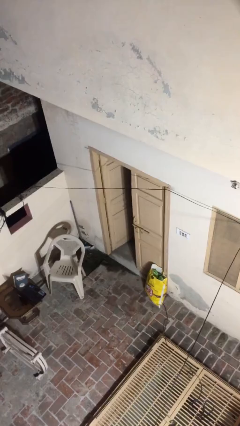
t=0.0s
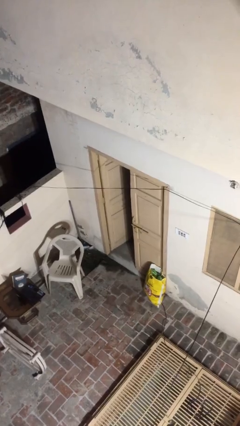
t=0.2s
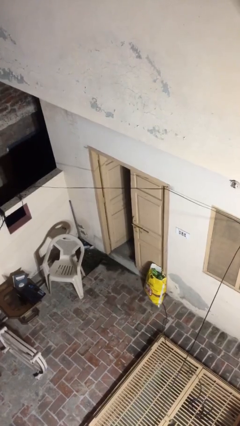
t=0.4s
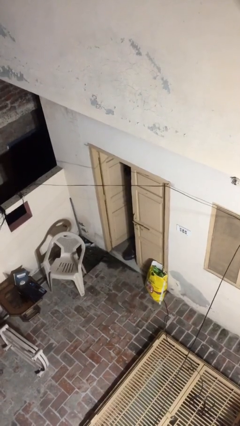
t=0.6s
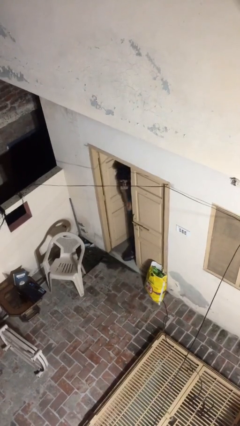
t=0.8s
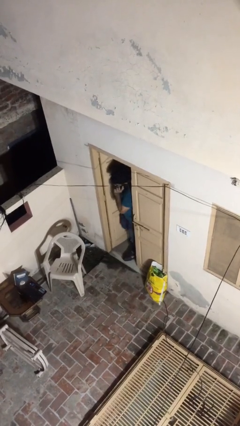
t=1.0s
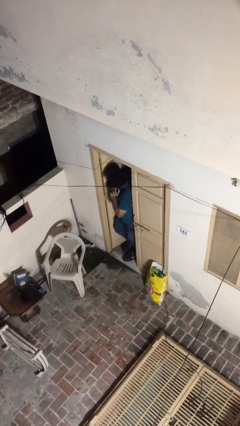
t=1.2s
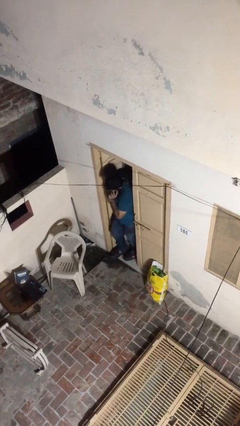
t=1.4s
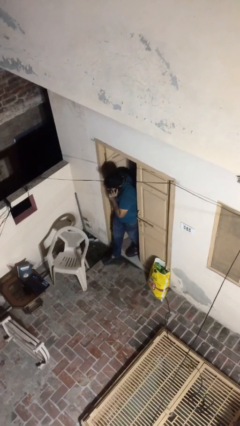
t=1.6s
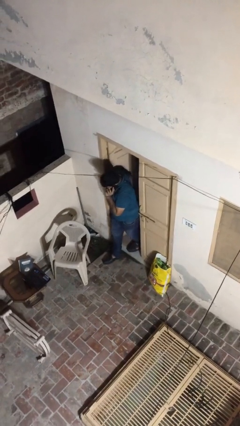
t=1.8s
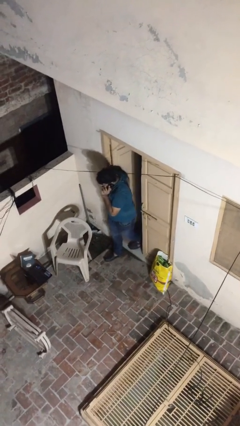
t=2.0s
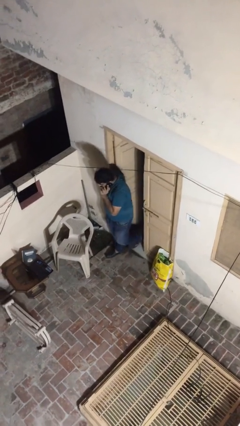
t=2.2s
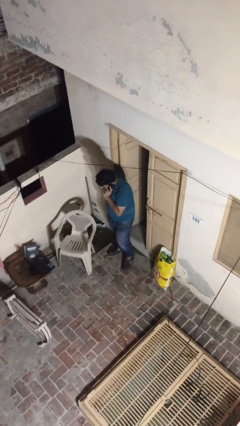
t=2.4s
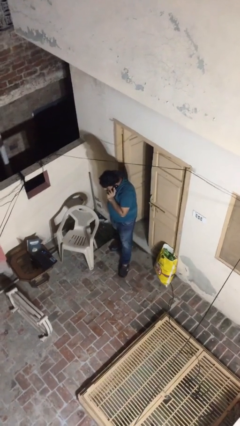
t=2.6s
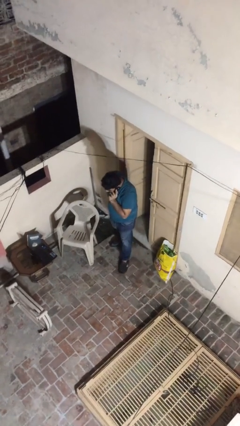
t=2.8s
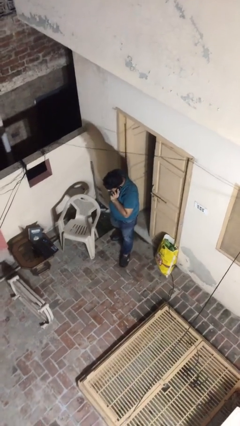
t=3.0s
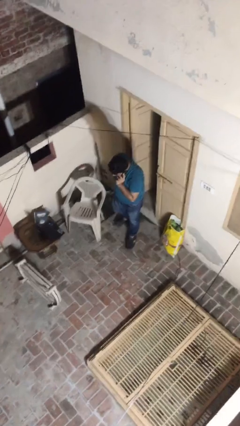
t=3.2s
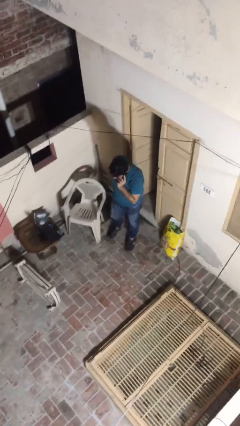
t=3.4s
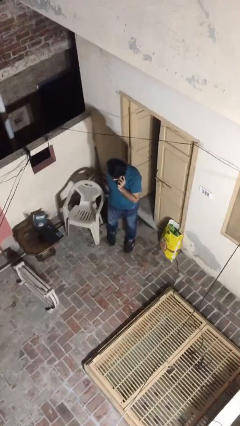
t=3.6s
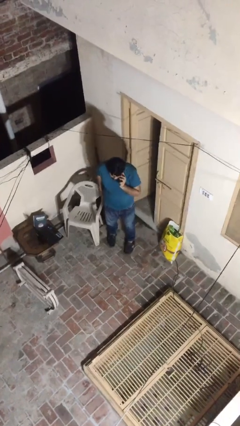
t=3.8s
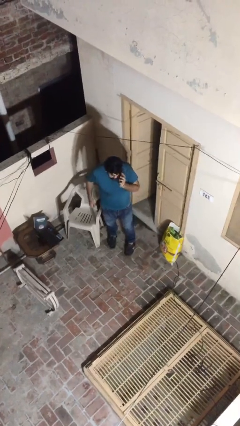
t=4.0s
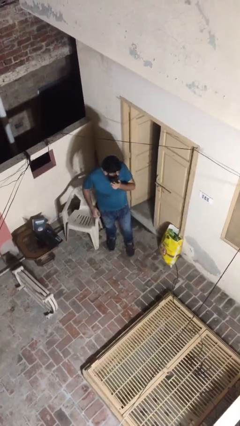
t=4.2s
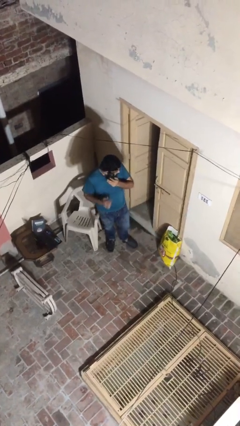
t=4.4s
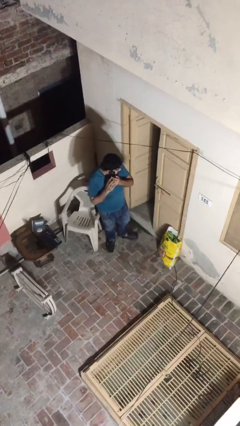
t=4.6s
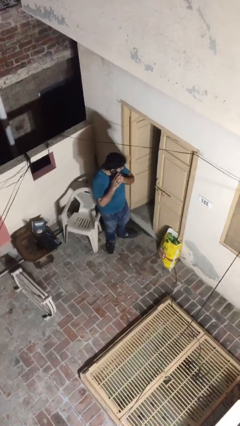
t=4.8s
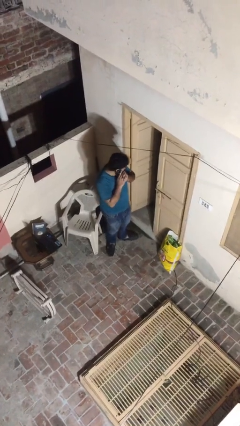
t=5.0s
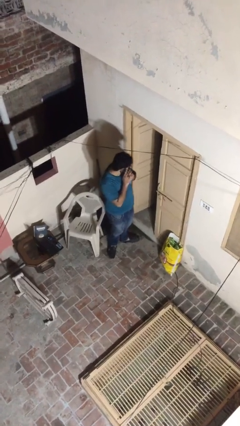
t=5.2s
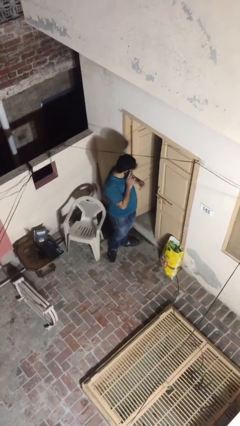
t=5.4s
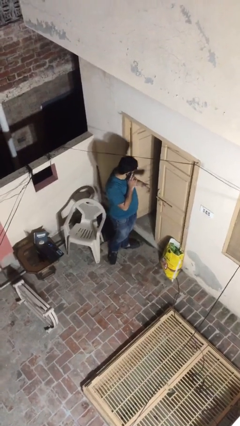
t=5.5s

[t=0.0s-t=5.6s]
person enters scene through structure

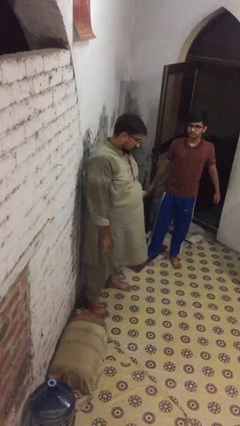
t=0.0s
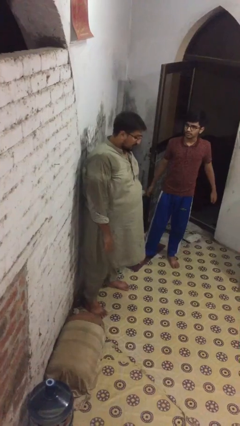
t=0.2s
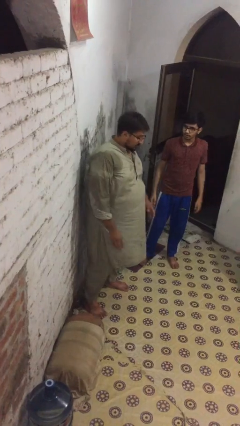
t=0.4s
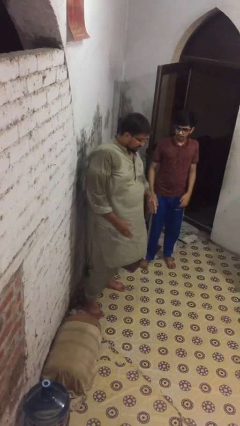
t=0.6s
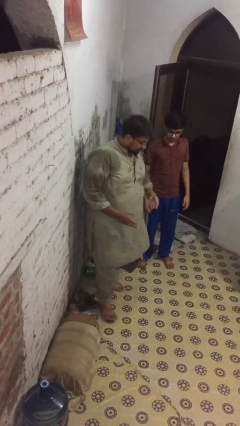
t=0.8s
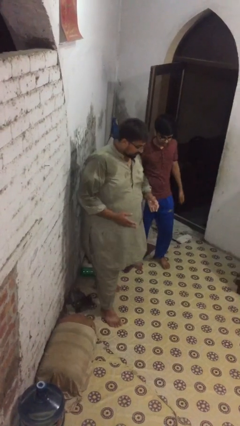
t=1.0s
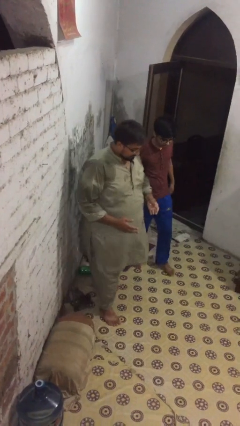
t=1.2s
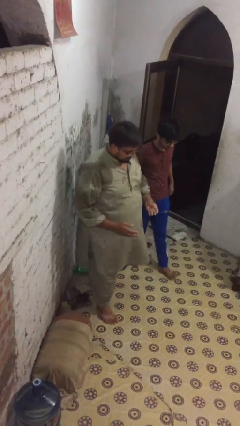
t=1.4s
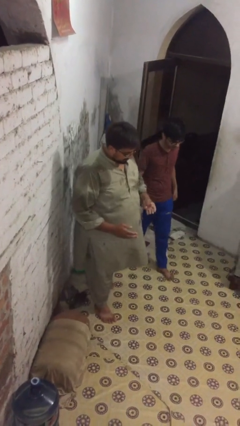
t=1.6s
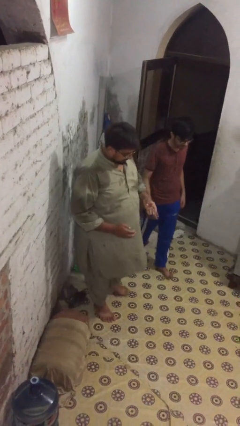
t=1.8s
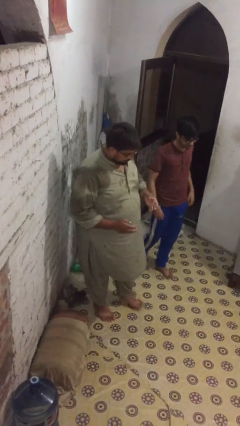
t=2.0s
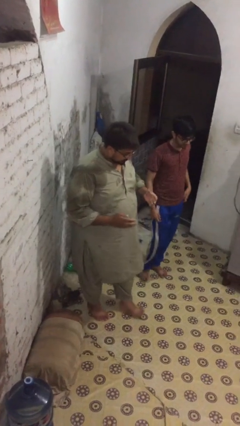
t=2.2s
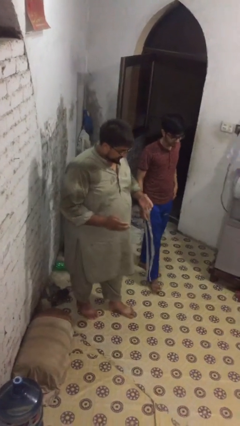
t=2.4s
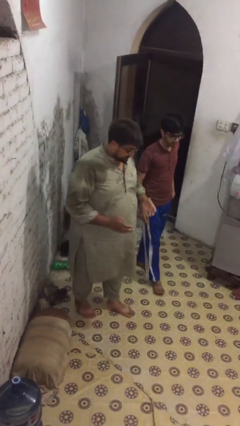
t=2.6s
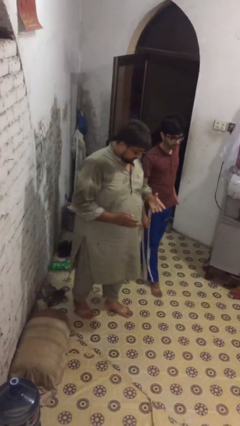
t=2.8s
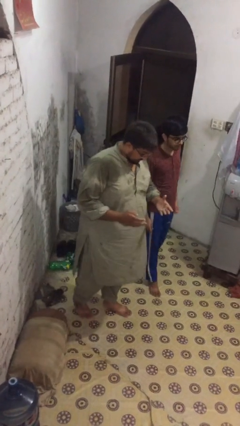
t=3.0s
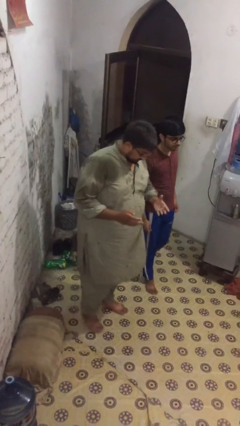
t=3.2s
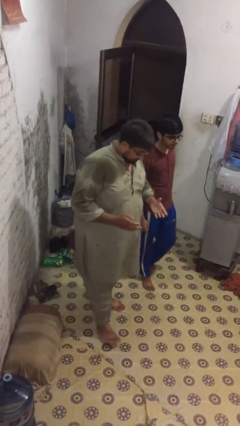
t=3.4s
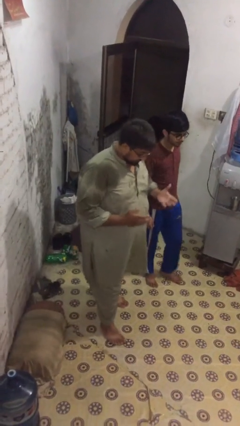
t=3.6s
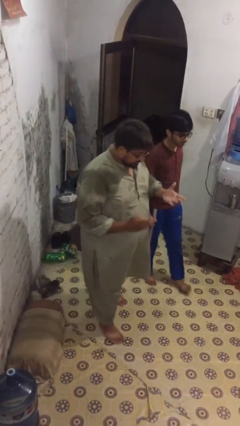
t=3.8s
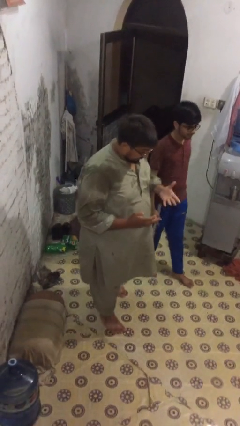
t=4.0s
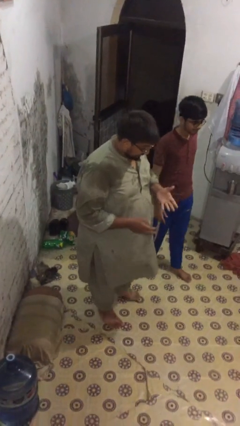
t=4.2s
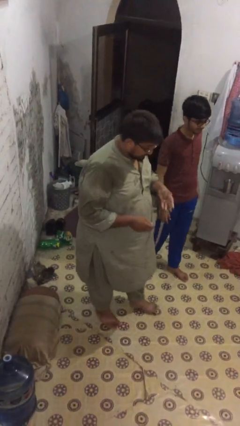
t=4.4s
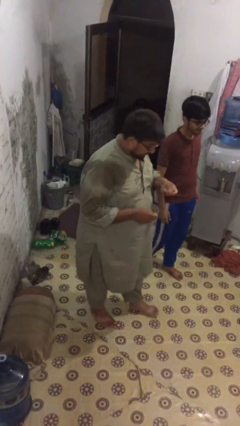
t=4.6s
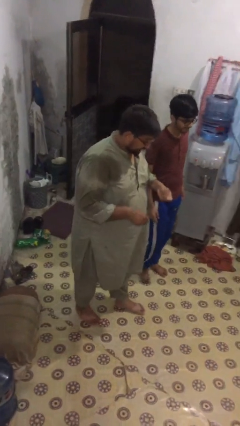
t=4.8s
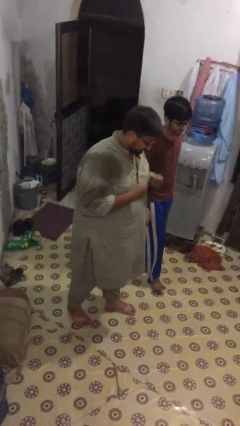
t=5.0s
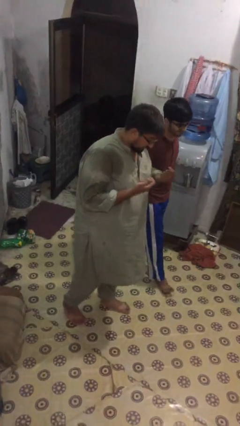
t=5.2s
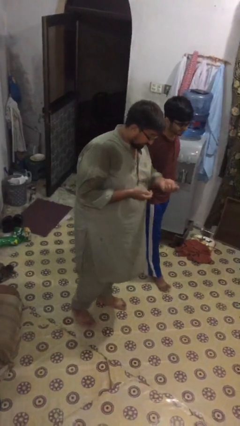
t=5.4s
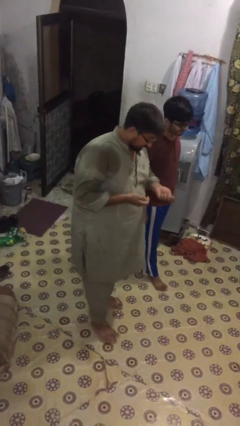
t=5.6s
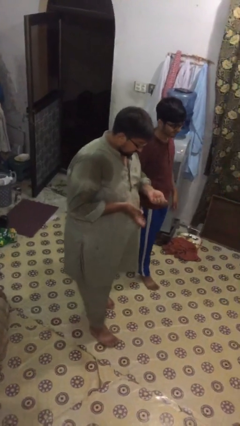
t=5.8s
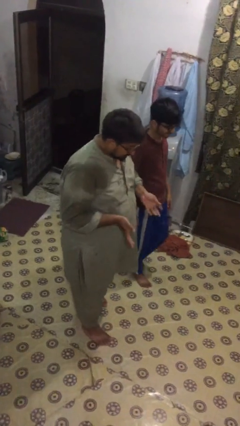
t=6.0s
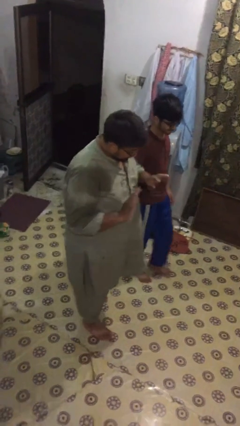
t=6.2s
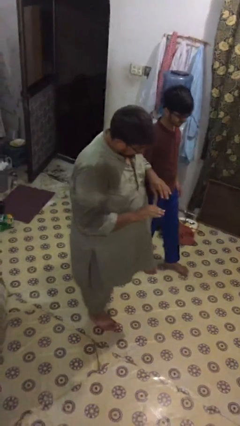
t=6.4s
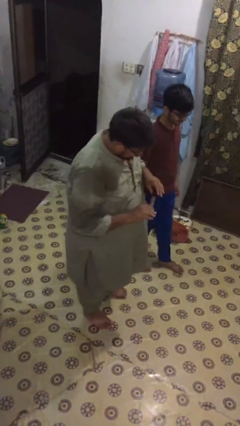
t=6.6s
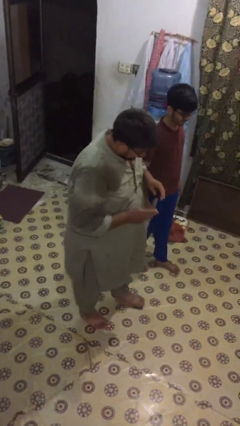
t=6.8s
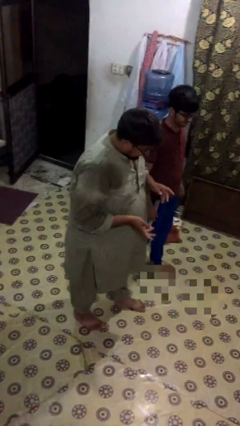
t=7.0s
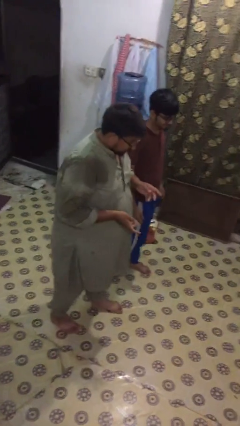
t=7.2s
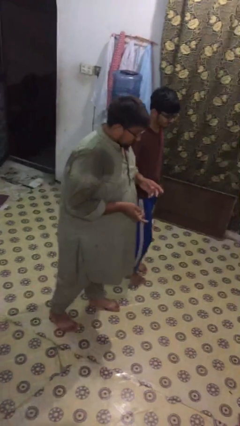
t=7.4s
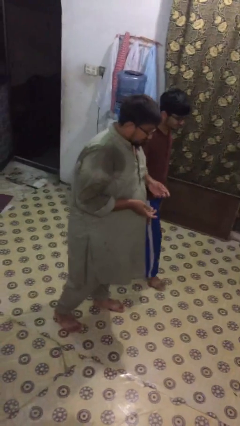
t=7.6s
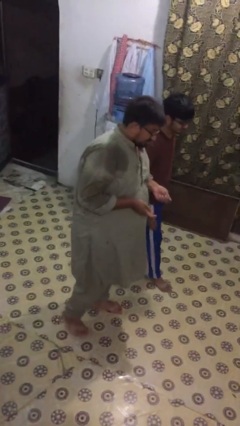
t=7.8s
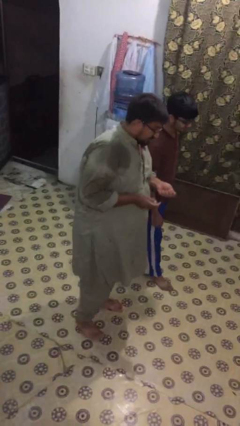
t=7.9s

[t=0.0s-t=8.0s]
person talks to person

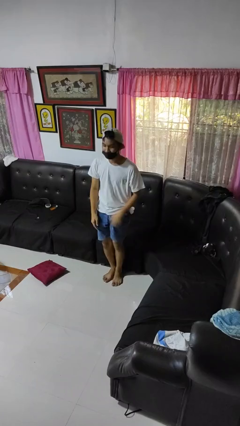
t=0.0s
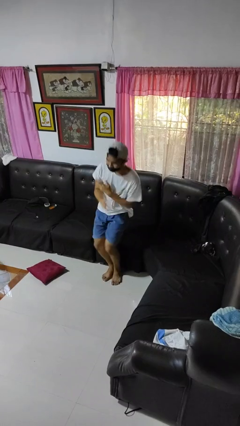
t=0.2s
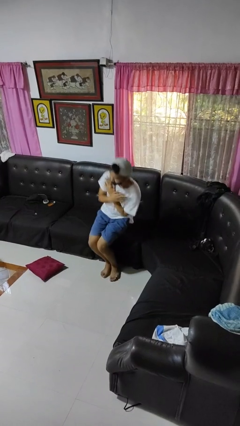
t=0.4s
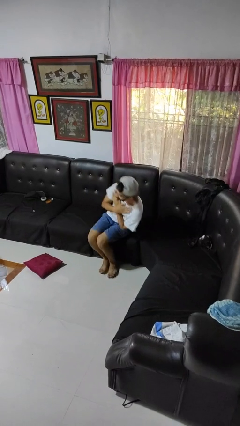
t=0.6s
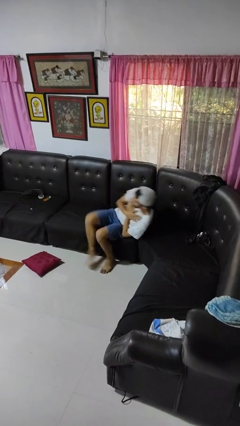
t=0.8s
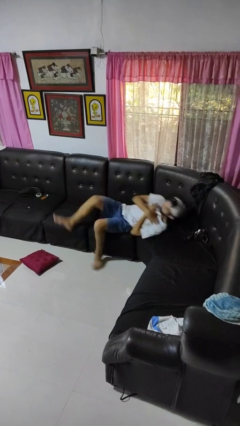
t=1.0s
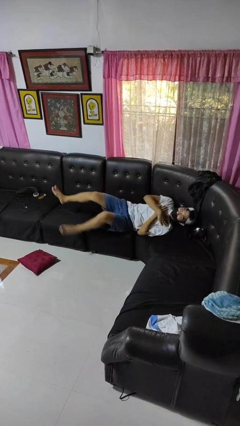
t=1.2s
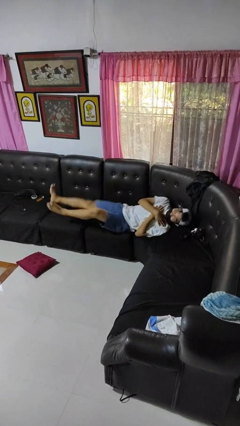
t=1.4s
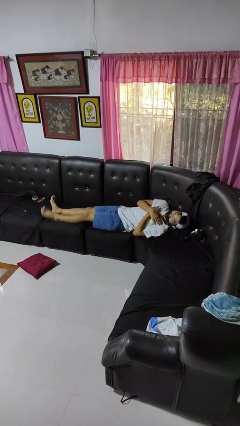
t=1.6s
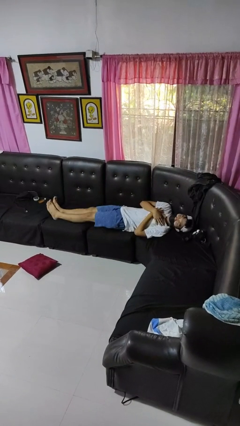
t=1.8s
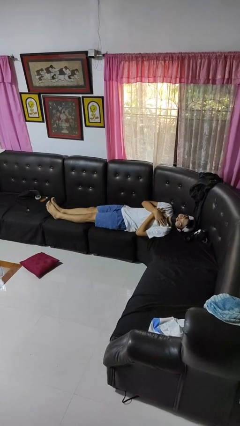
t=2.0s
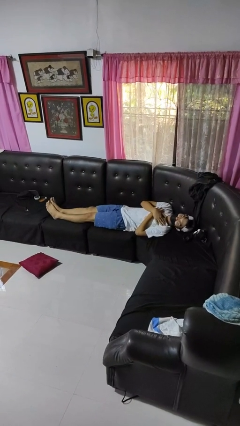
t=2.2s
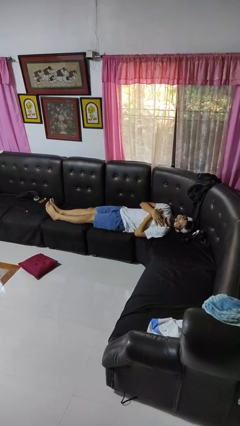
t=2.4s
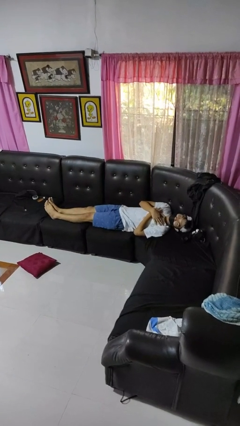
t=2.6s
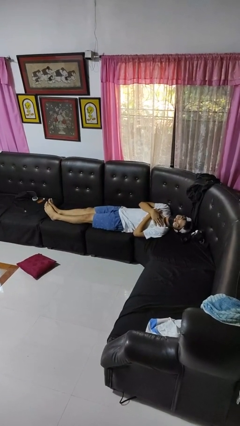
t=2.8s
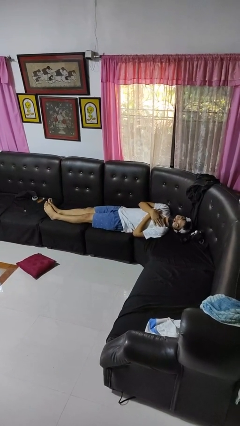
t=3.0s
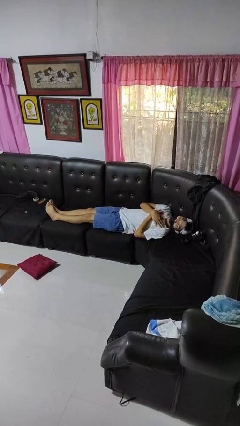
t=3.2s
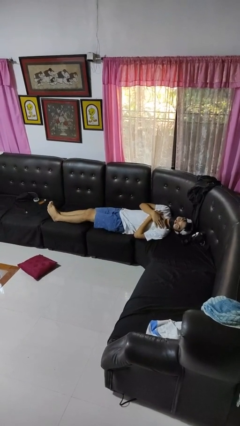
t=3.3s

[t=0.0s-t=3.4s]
person lies down on couch

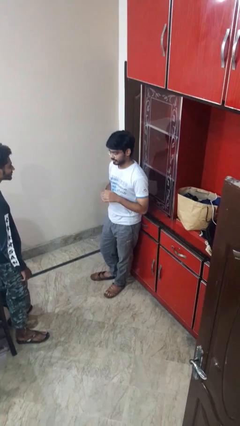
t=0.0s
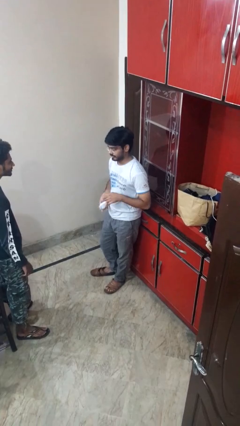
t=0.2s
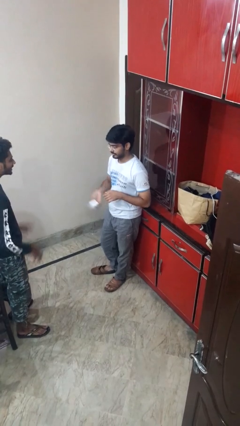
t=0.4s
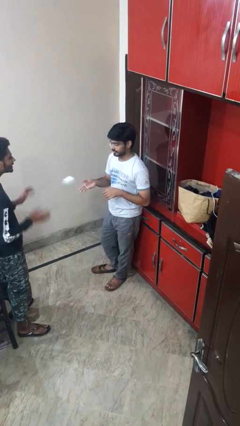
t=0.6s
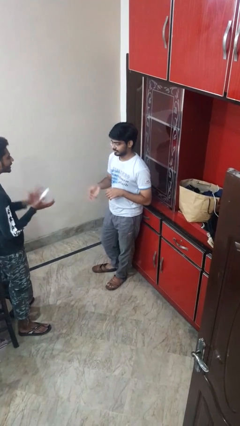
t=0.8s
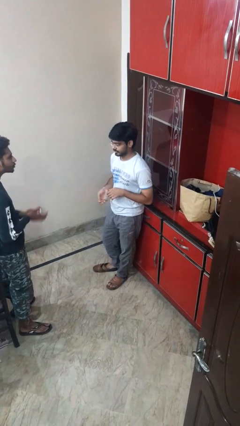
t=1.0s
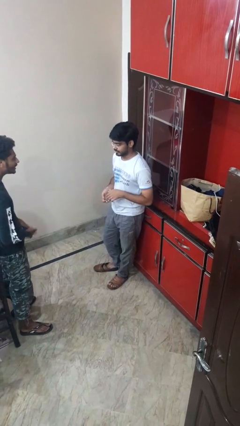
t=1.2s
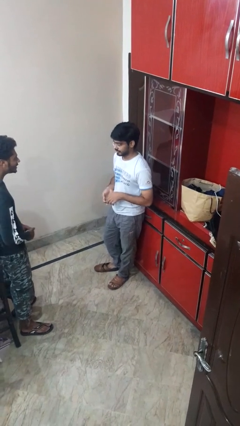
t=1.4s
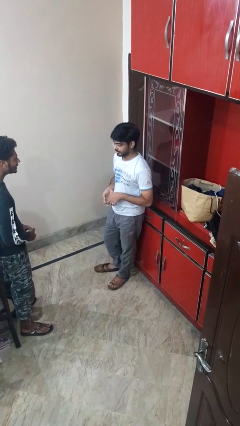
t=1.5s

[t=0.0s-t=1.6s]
person throws object to person
